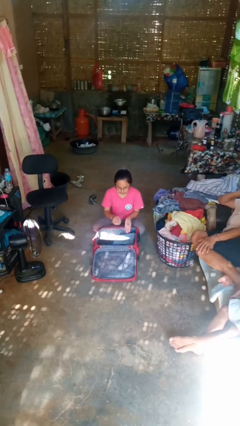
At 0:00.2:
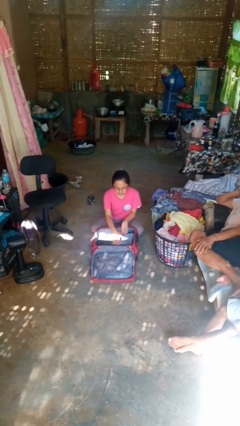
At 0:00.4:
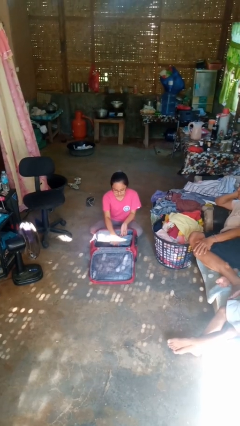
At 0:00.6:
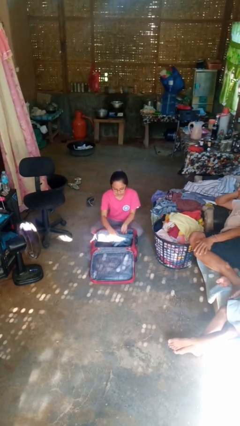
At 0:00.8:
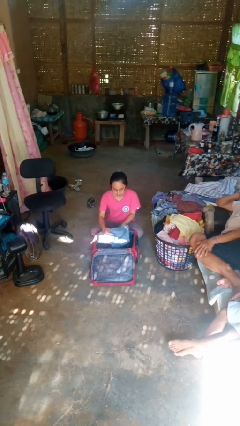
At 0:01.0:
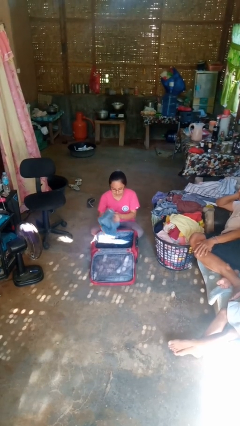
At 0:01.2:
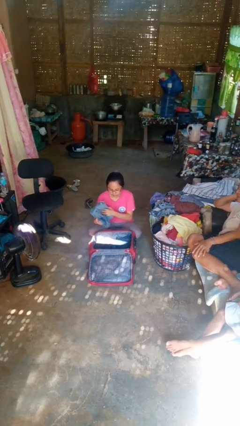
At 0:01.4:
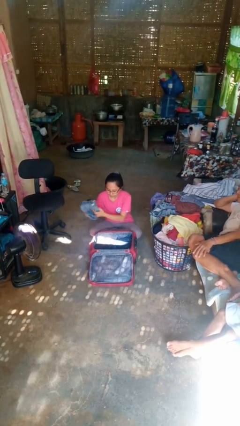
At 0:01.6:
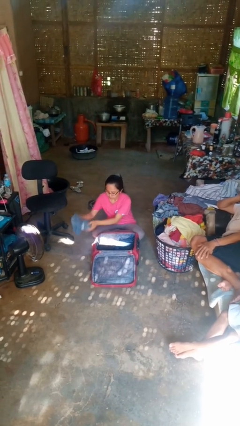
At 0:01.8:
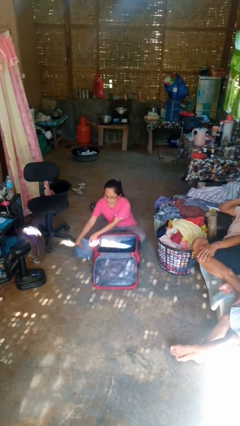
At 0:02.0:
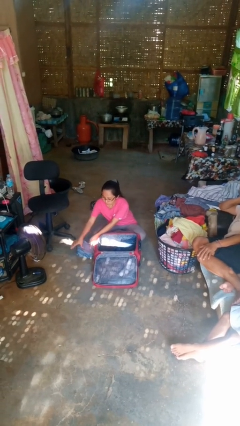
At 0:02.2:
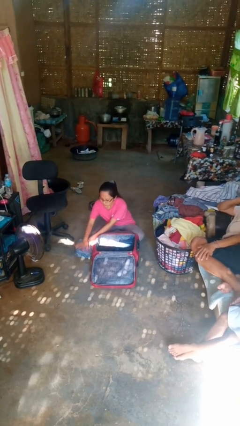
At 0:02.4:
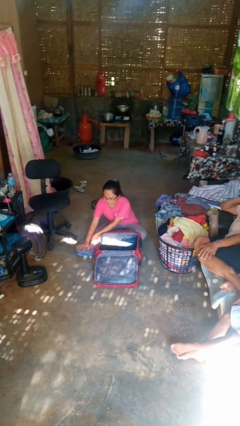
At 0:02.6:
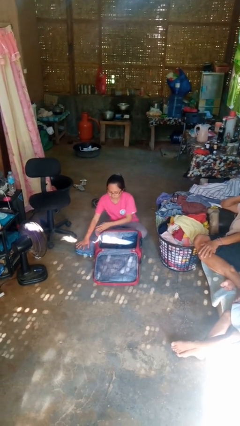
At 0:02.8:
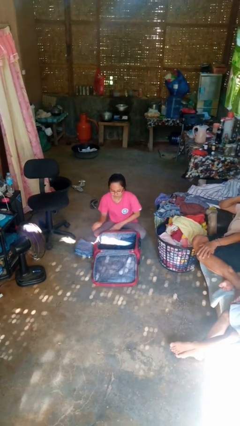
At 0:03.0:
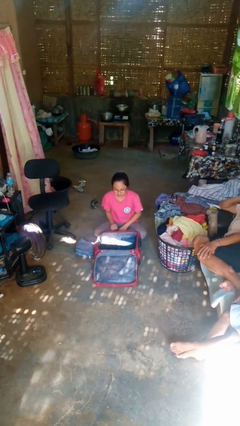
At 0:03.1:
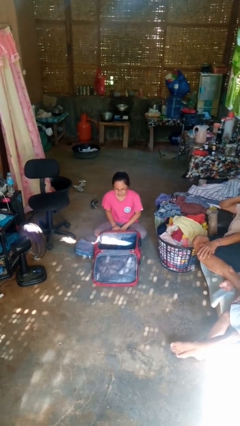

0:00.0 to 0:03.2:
person unloads clothes from suitcase

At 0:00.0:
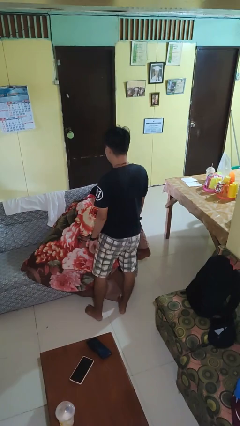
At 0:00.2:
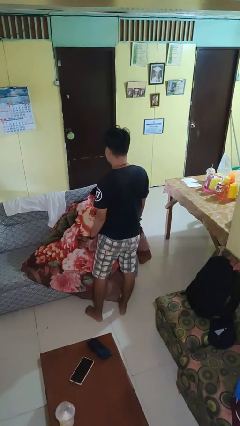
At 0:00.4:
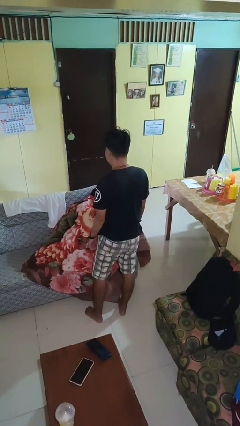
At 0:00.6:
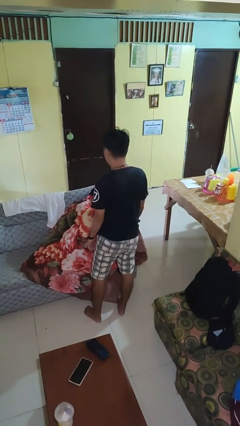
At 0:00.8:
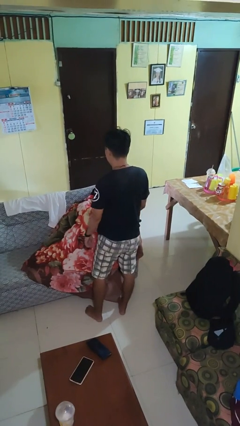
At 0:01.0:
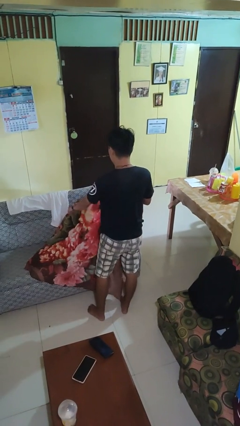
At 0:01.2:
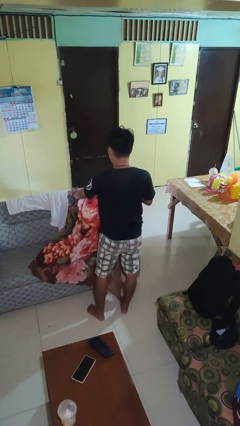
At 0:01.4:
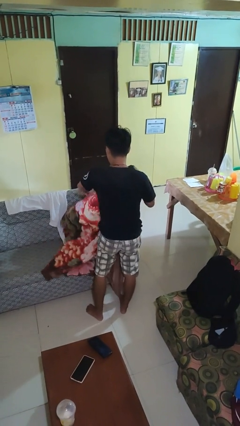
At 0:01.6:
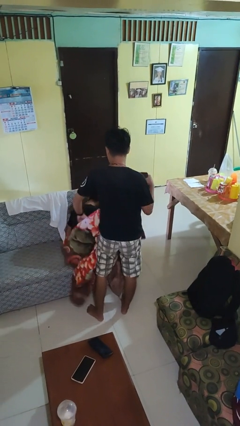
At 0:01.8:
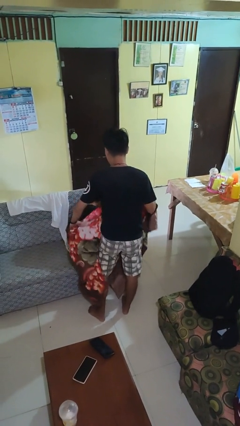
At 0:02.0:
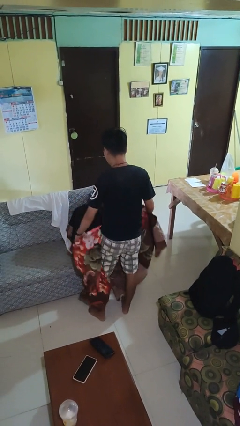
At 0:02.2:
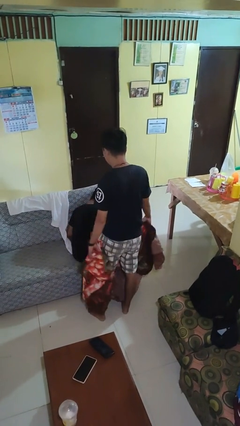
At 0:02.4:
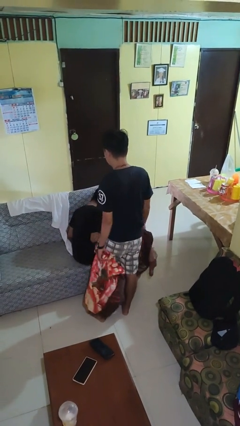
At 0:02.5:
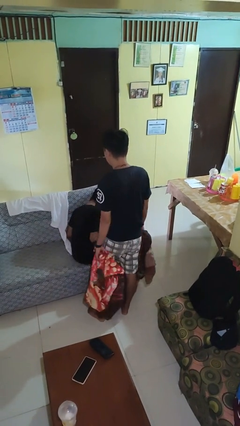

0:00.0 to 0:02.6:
person uncovers friend with blanket

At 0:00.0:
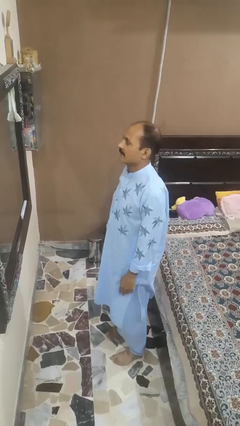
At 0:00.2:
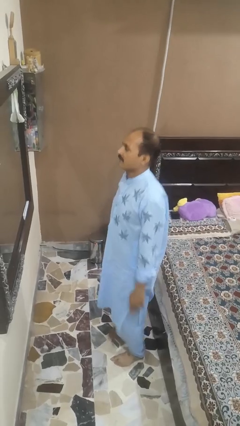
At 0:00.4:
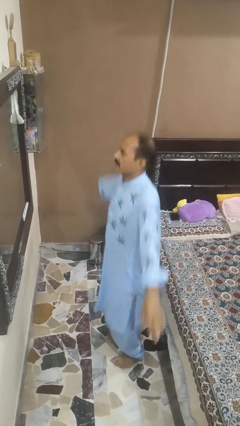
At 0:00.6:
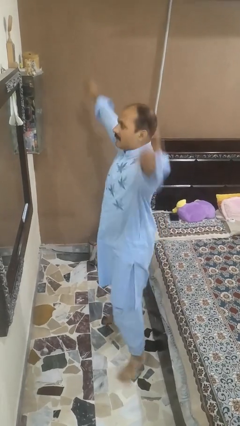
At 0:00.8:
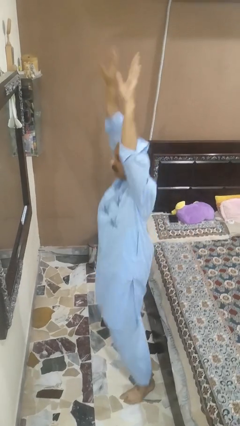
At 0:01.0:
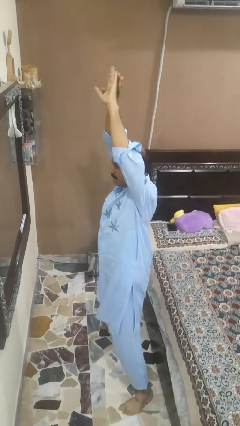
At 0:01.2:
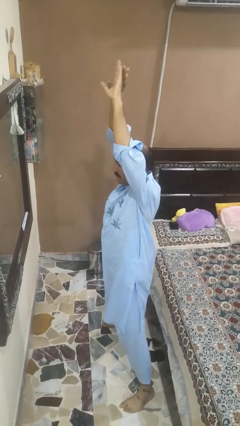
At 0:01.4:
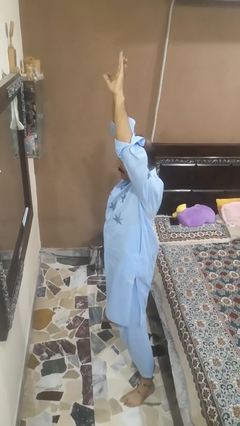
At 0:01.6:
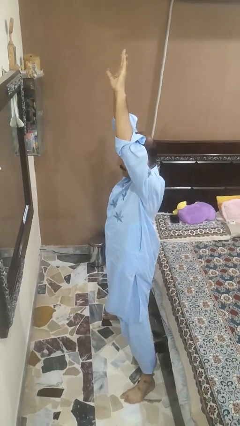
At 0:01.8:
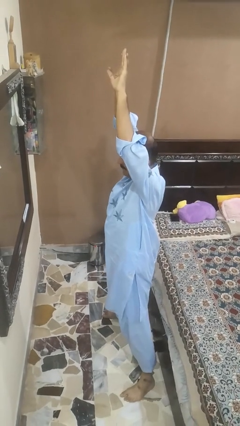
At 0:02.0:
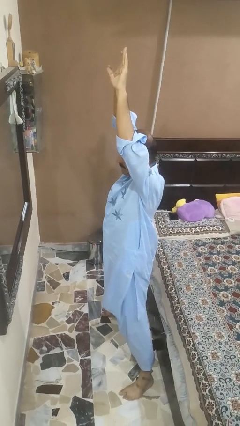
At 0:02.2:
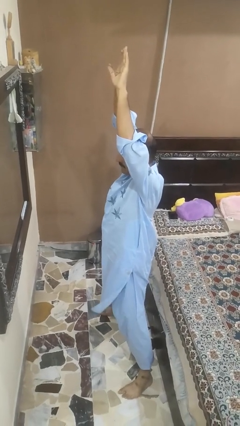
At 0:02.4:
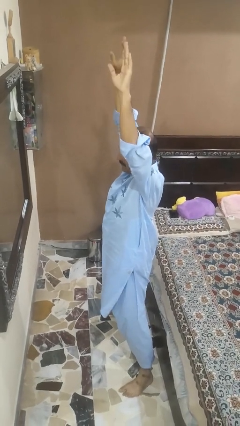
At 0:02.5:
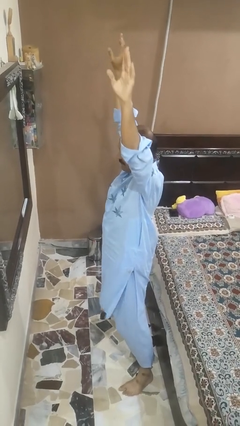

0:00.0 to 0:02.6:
person exercises with jumping jacks

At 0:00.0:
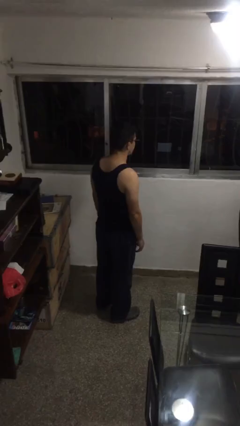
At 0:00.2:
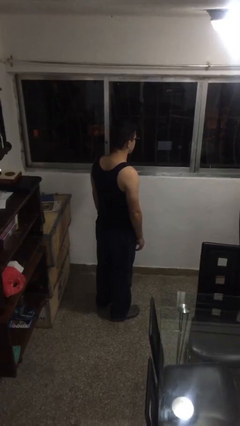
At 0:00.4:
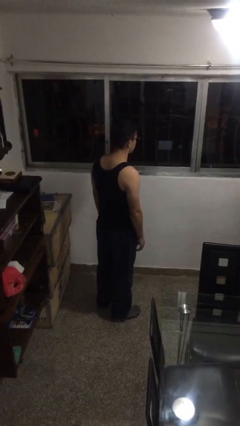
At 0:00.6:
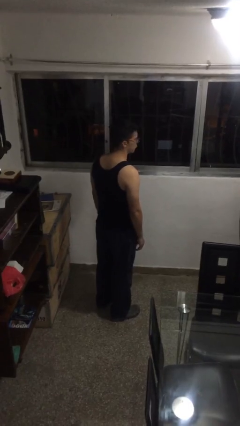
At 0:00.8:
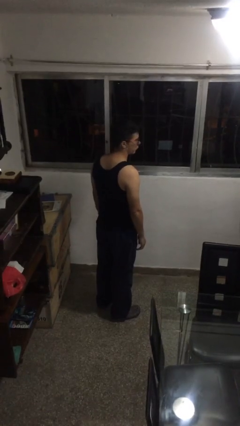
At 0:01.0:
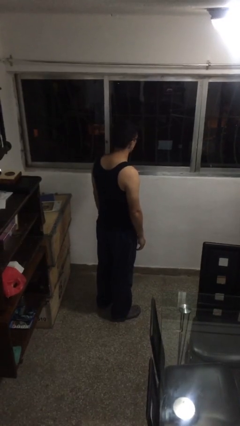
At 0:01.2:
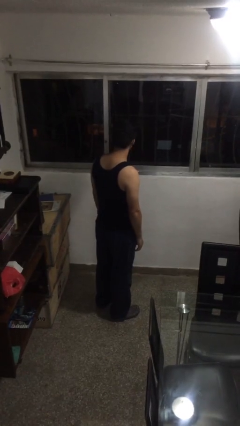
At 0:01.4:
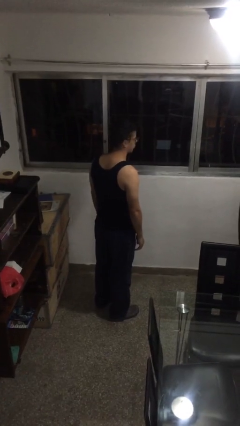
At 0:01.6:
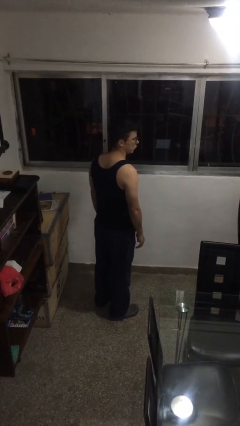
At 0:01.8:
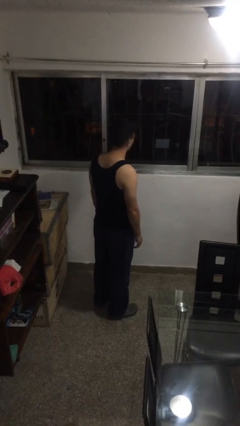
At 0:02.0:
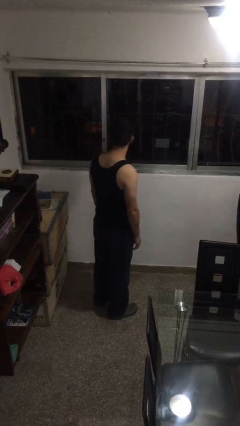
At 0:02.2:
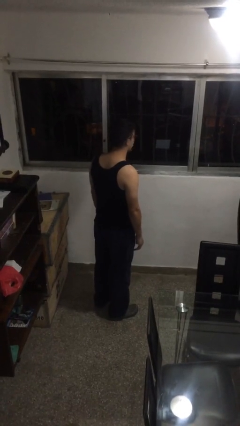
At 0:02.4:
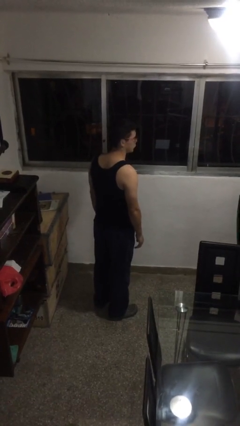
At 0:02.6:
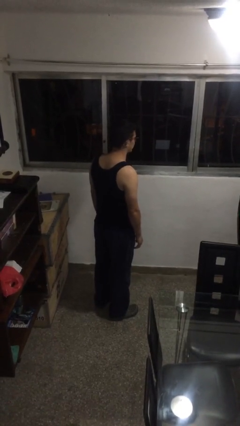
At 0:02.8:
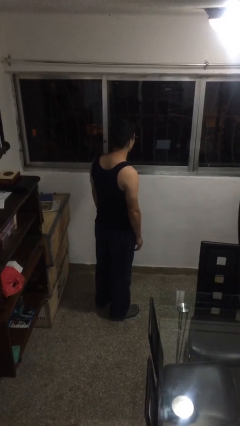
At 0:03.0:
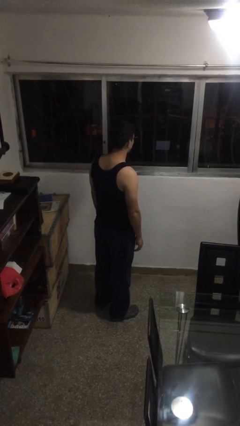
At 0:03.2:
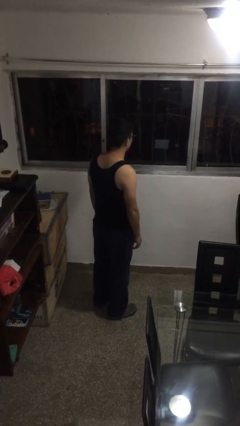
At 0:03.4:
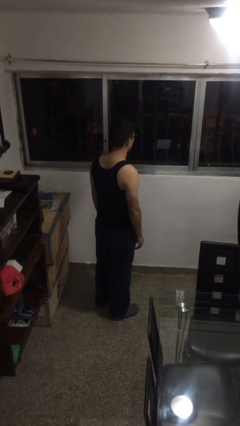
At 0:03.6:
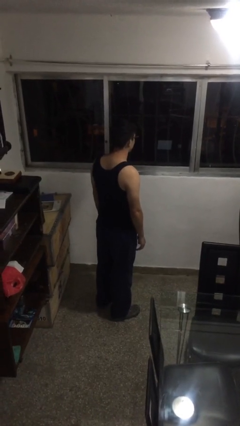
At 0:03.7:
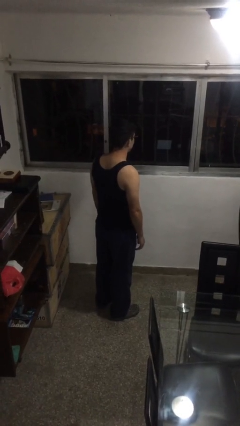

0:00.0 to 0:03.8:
person shakes head

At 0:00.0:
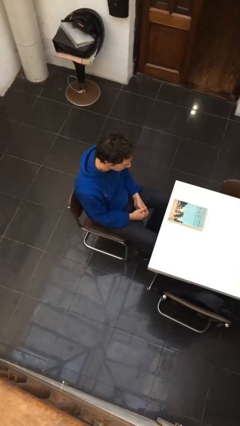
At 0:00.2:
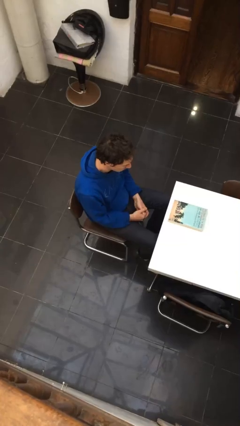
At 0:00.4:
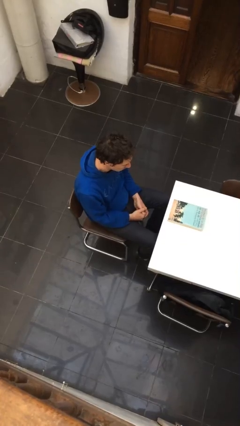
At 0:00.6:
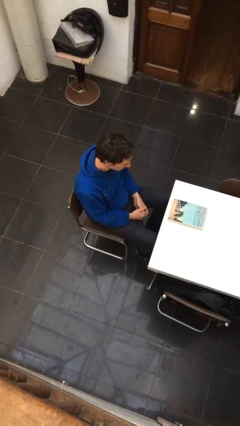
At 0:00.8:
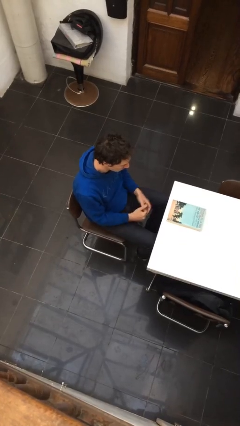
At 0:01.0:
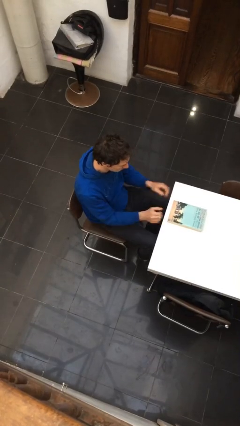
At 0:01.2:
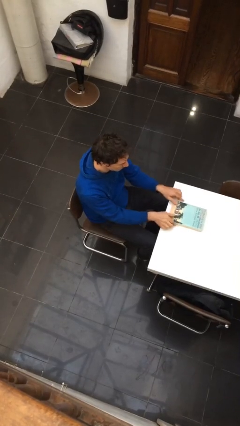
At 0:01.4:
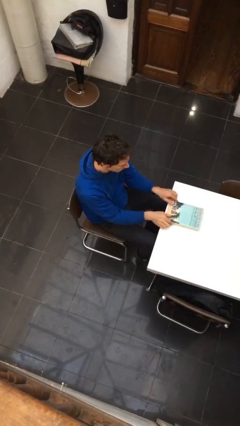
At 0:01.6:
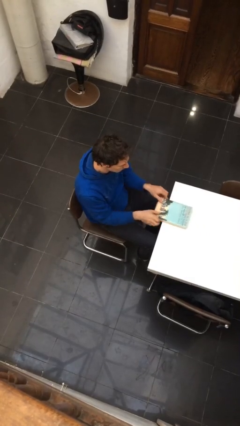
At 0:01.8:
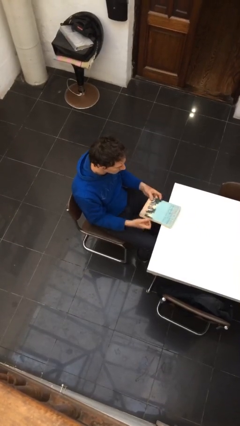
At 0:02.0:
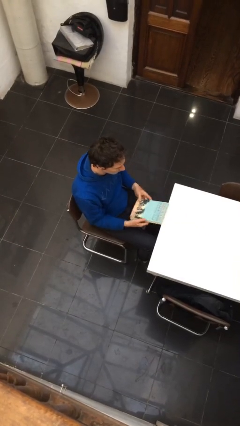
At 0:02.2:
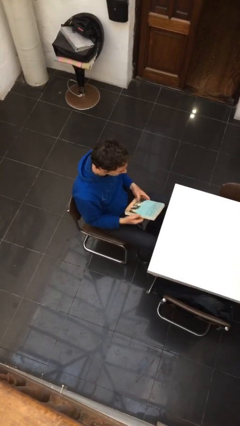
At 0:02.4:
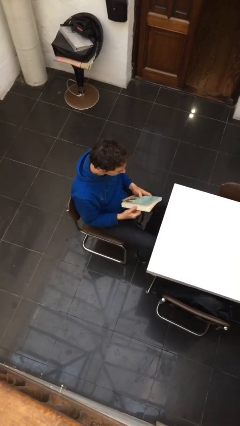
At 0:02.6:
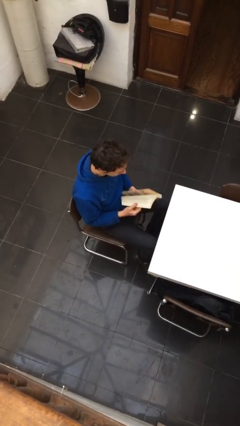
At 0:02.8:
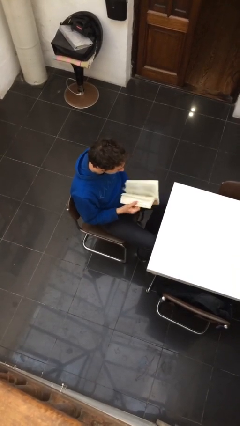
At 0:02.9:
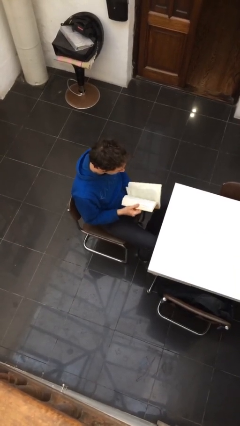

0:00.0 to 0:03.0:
person picks up object from table

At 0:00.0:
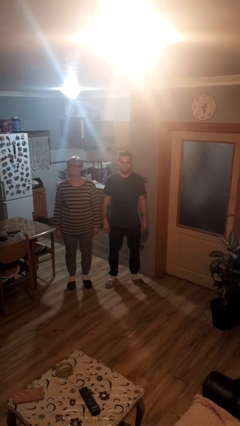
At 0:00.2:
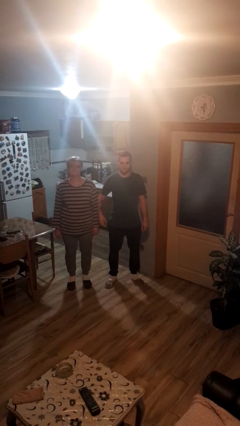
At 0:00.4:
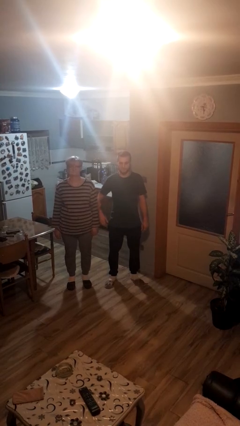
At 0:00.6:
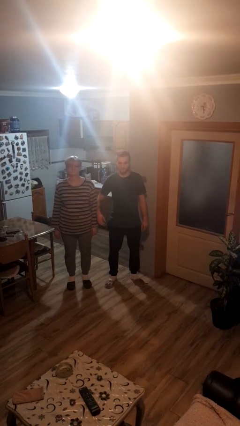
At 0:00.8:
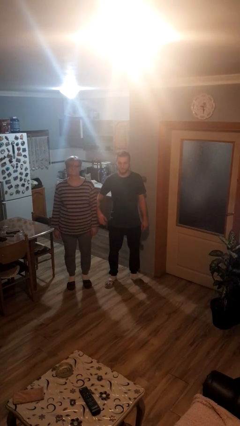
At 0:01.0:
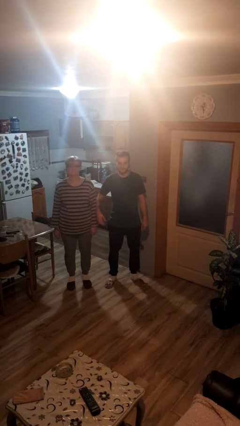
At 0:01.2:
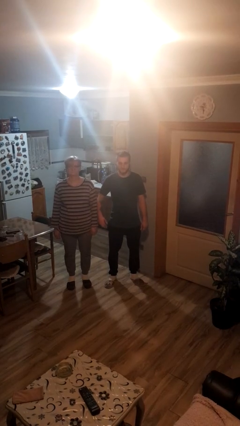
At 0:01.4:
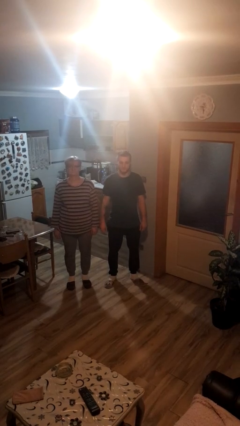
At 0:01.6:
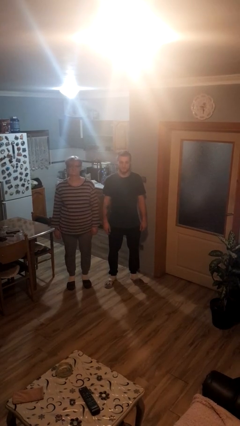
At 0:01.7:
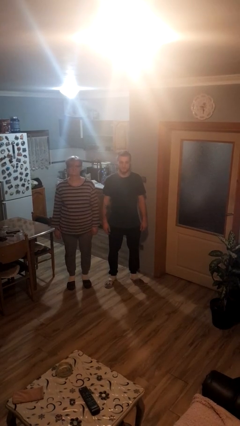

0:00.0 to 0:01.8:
person nudges person with elbow

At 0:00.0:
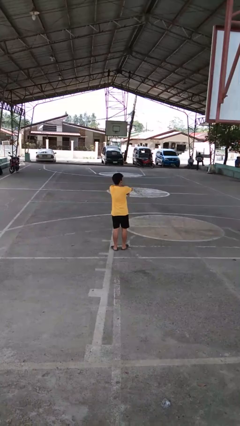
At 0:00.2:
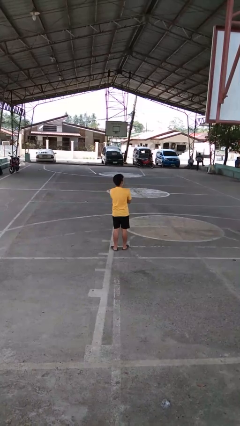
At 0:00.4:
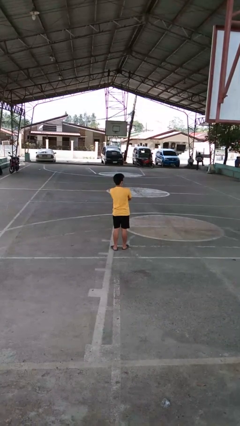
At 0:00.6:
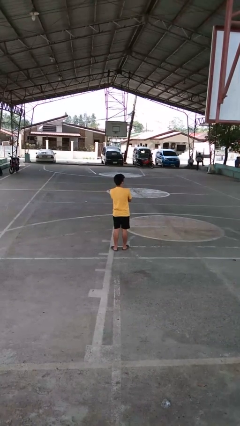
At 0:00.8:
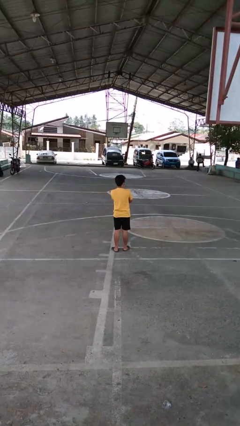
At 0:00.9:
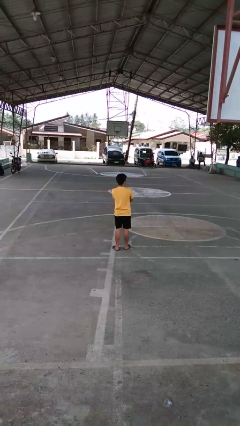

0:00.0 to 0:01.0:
person crosses arms
